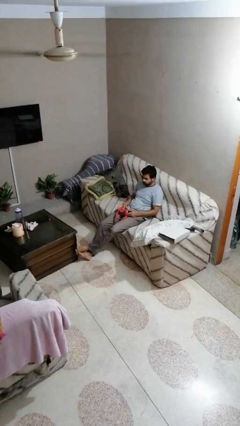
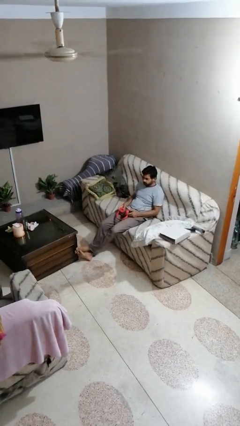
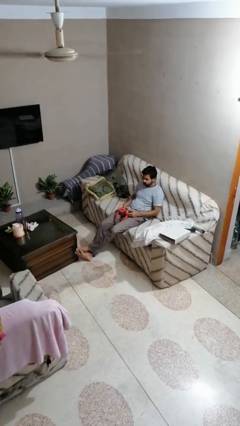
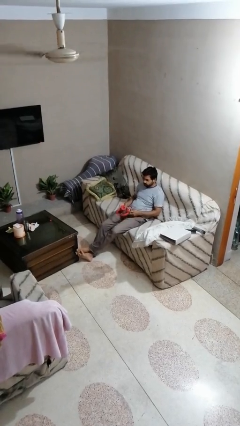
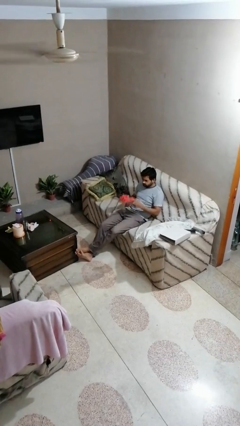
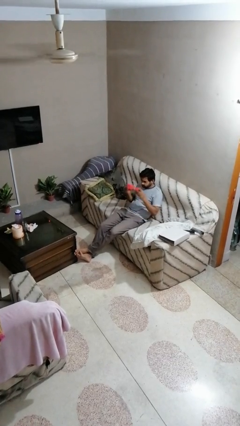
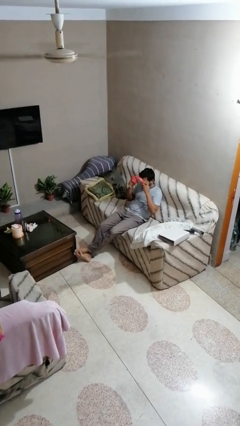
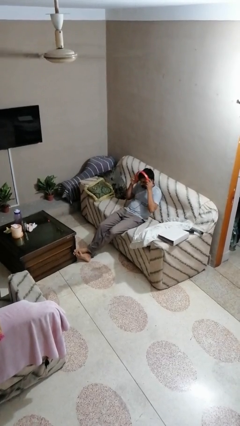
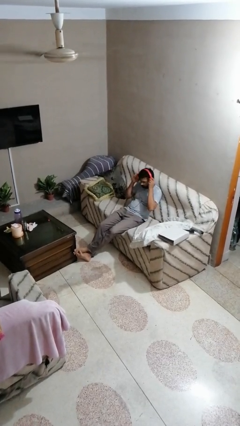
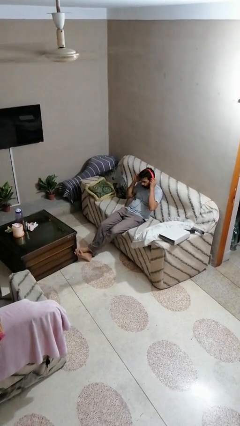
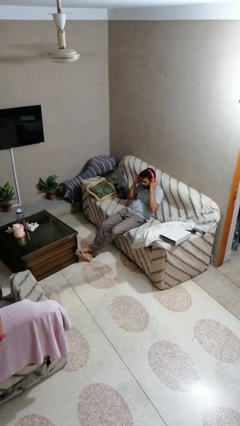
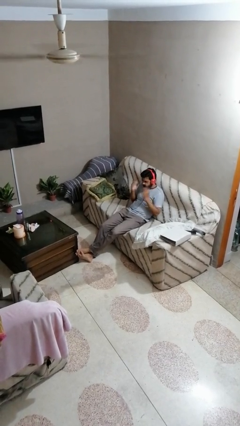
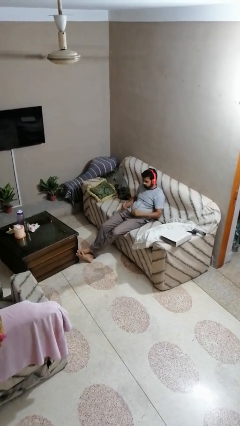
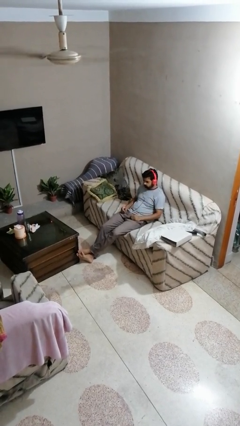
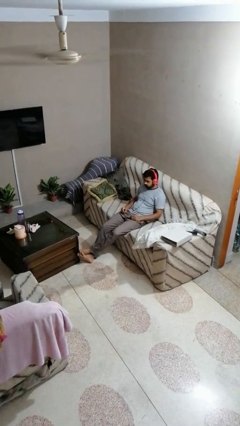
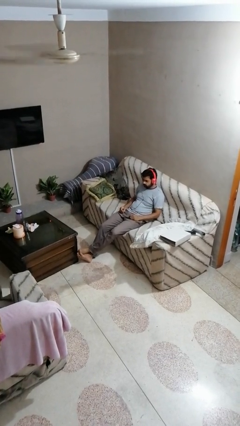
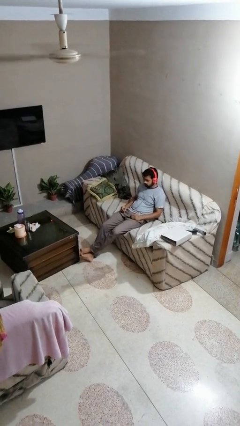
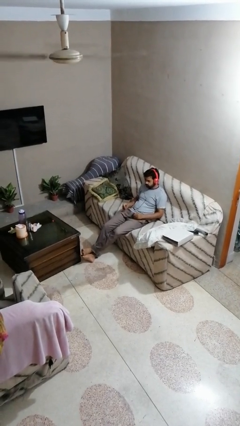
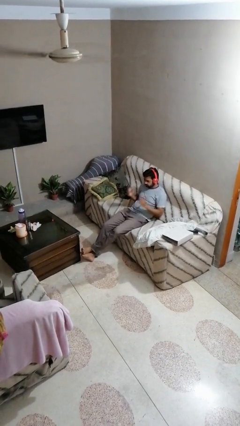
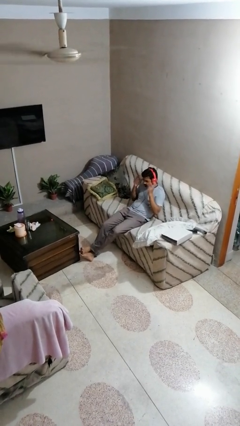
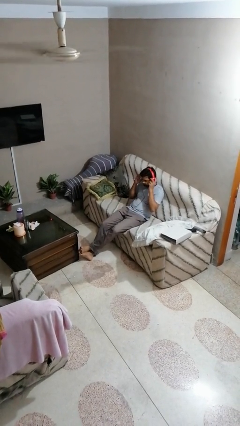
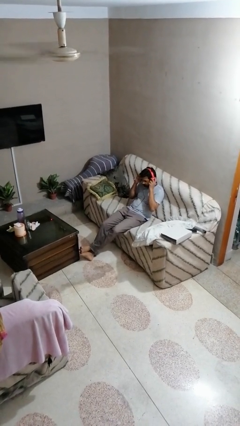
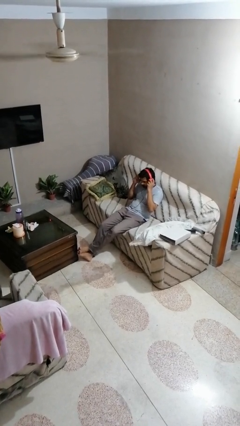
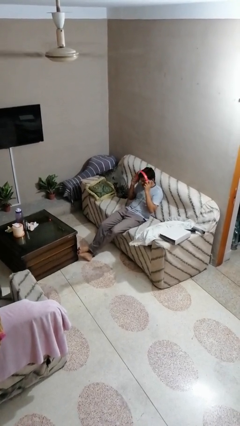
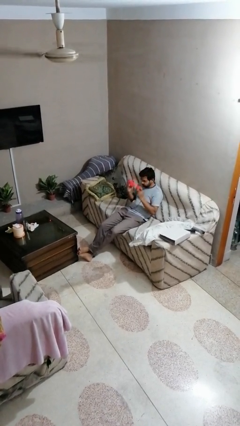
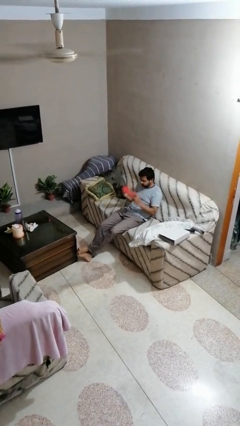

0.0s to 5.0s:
person puts on headphones

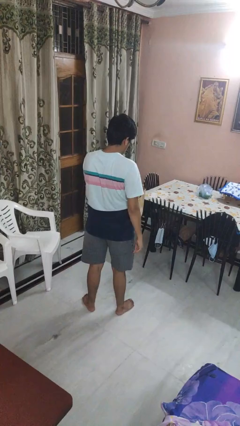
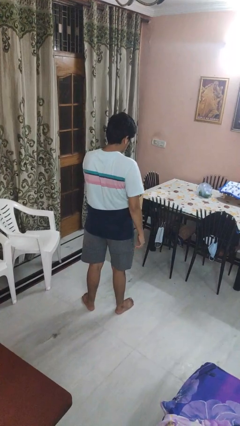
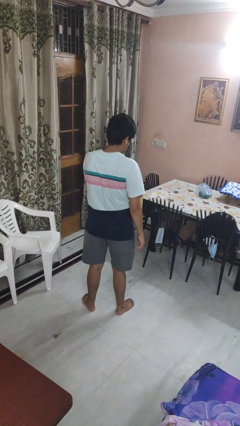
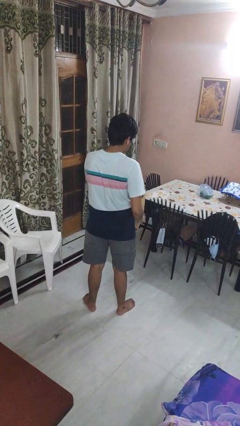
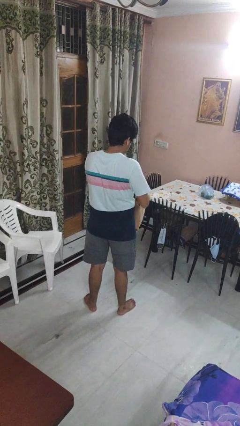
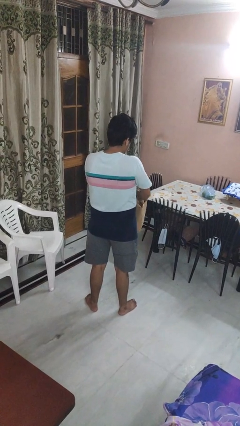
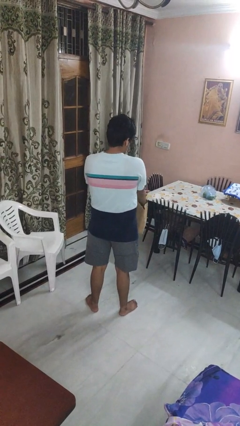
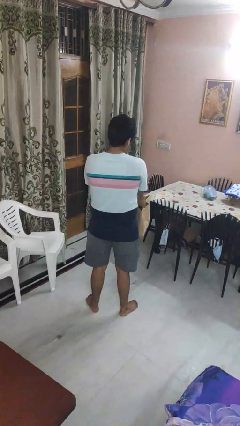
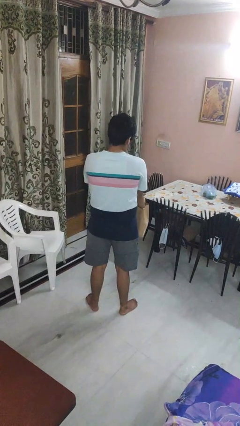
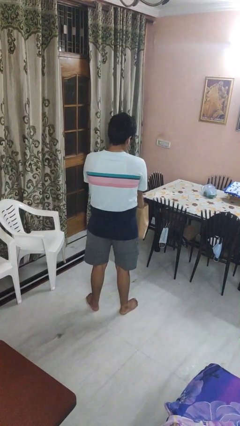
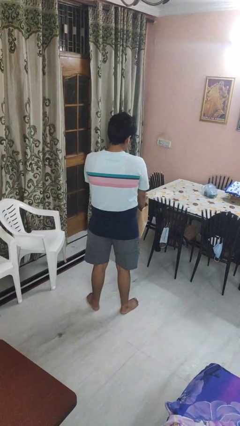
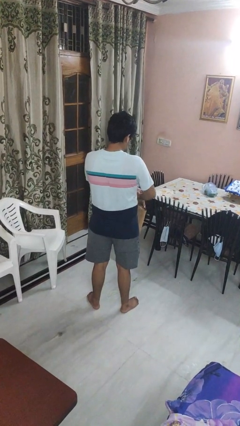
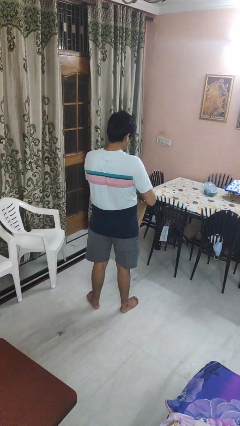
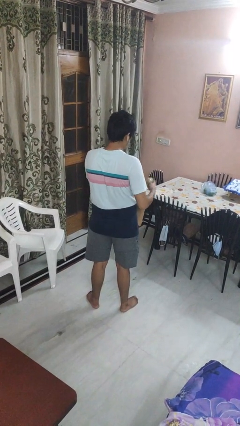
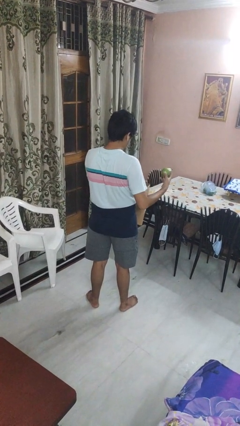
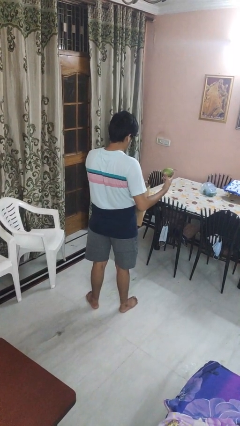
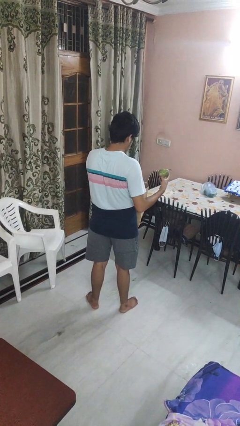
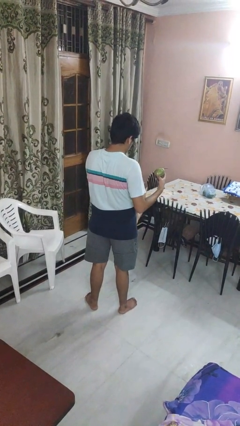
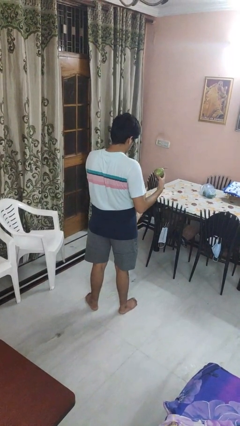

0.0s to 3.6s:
person takes object from bag

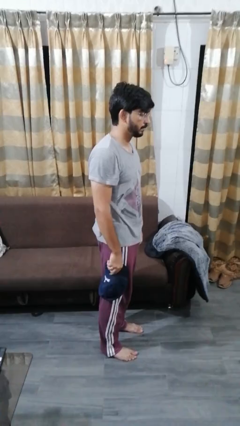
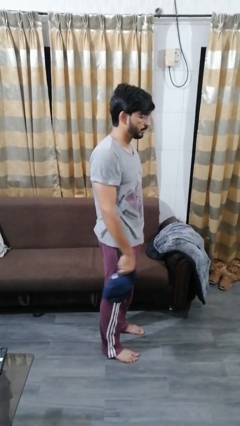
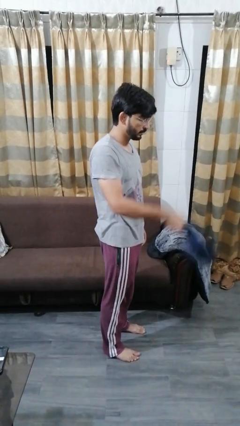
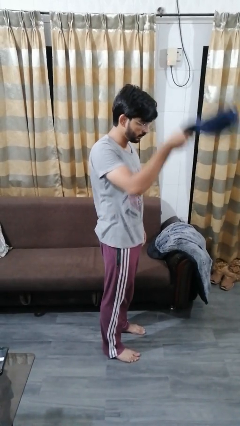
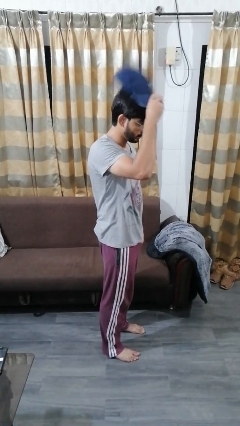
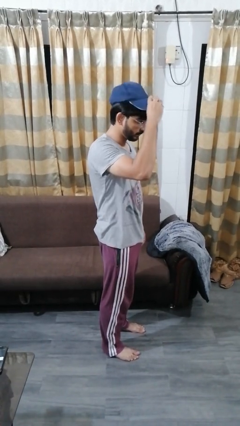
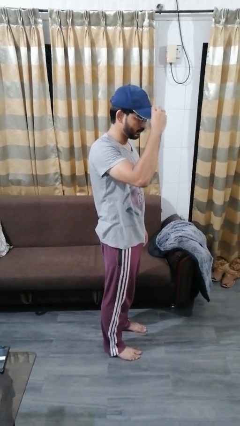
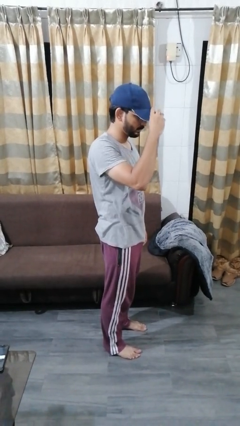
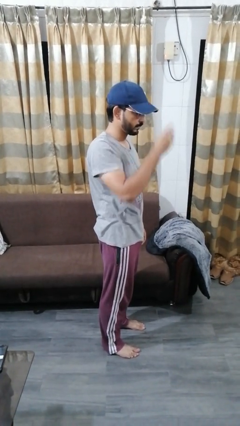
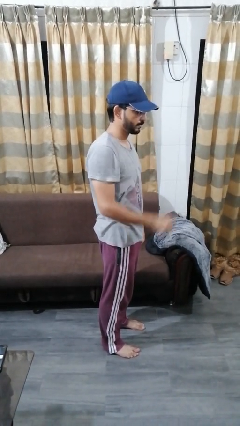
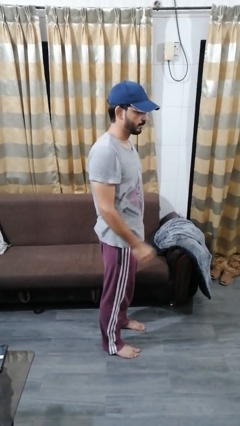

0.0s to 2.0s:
person puts on hat

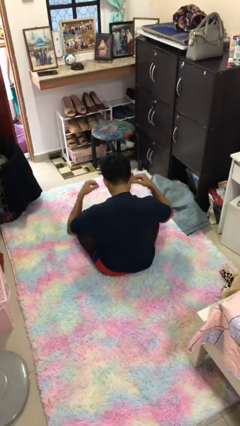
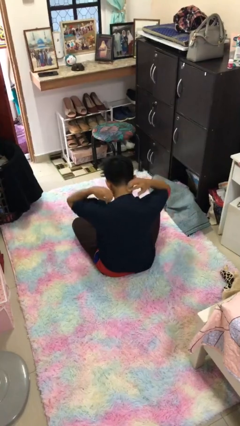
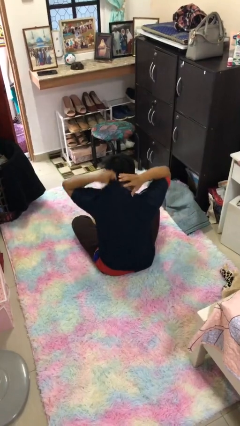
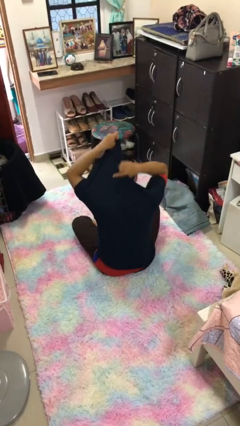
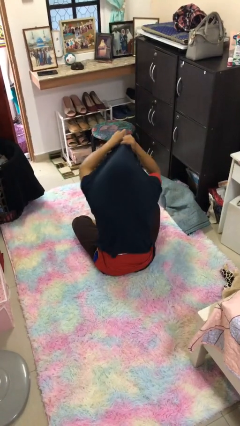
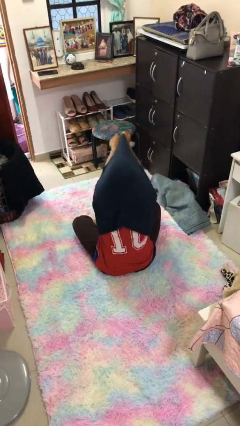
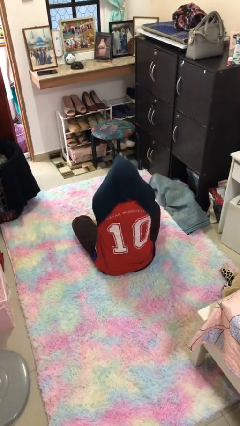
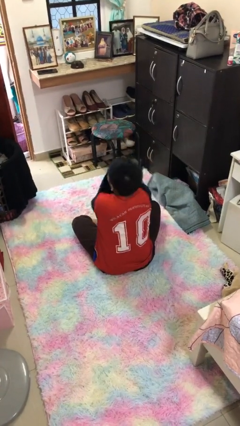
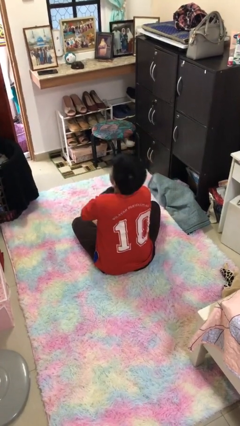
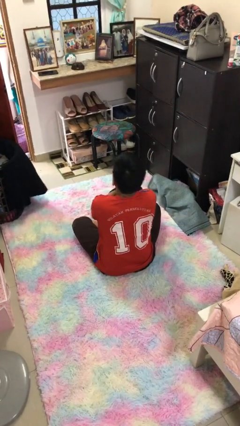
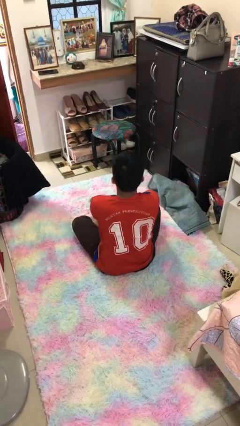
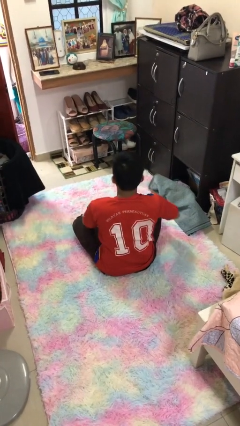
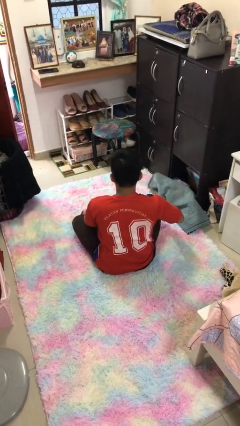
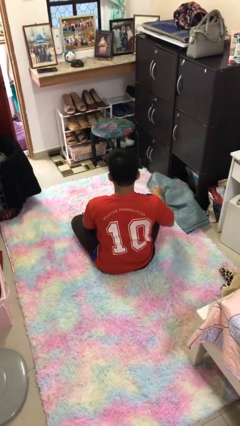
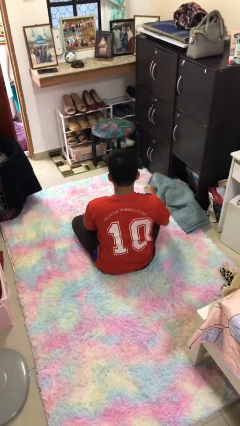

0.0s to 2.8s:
person takes off shirt

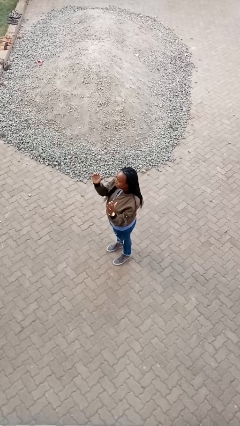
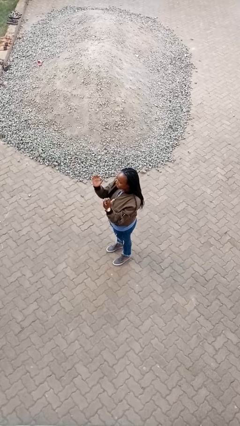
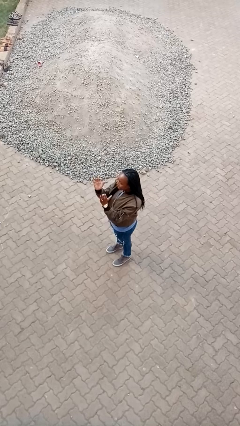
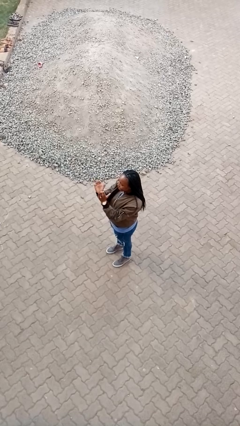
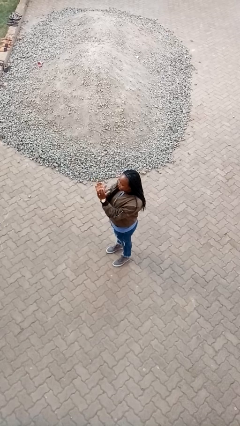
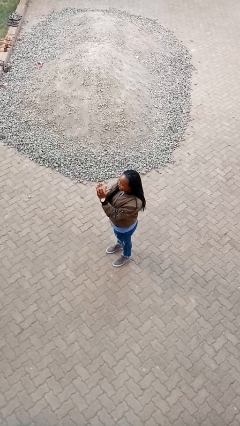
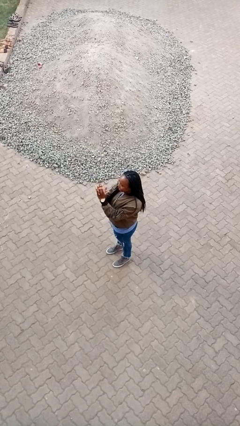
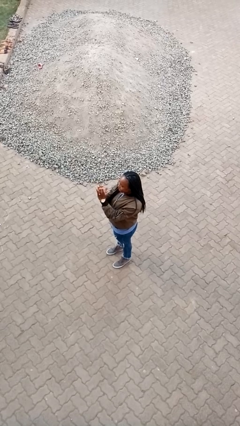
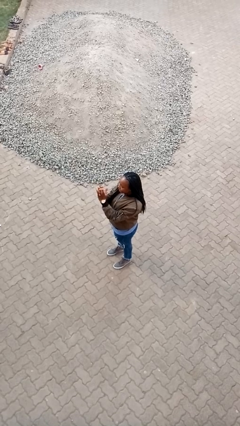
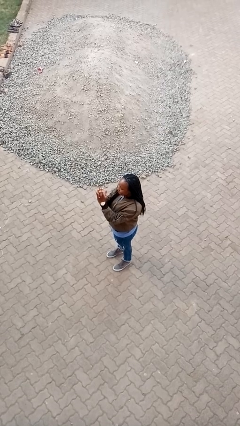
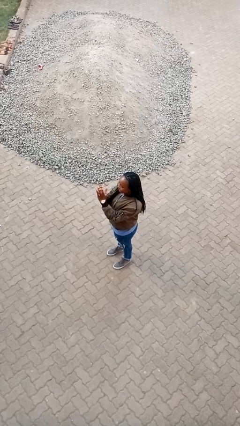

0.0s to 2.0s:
person gestures zoom in

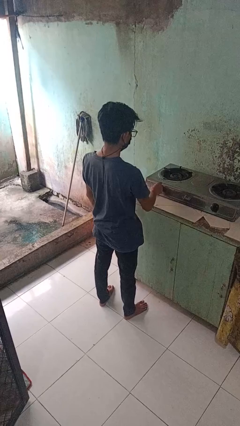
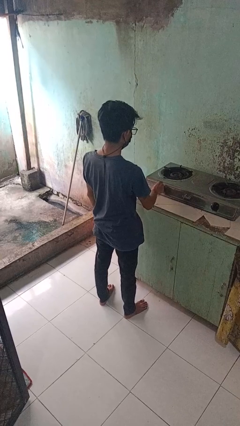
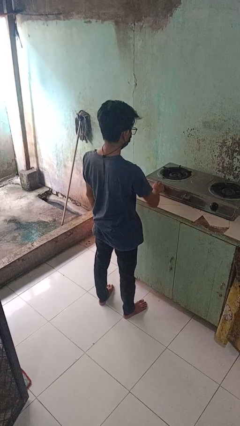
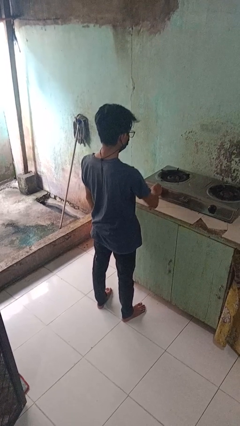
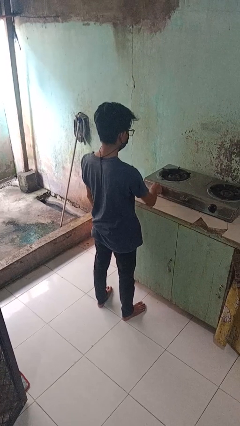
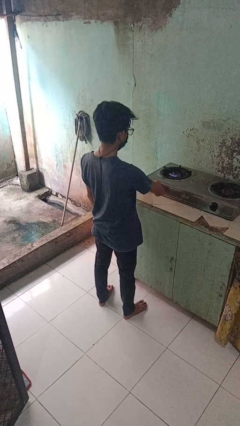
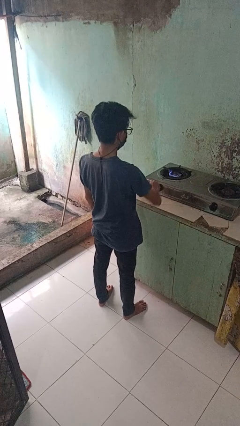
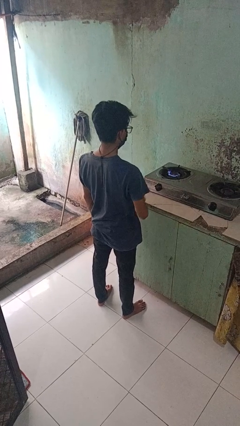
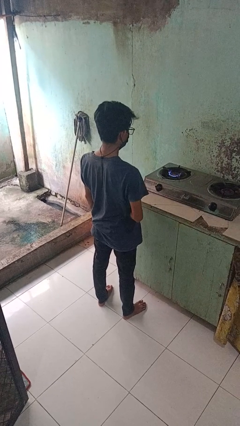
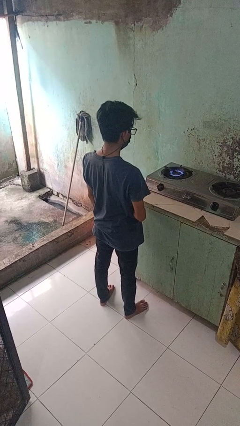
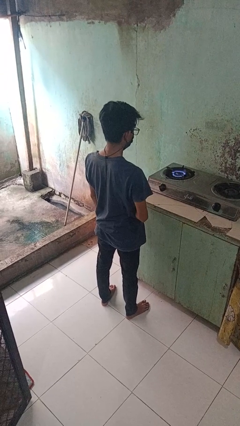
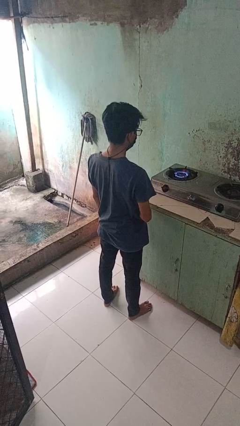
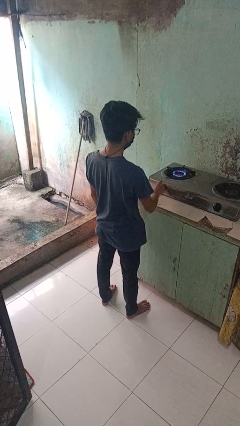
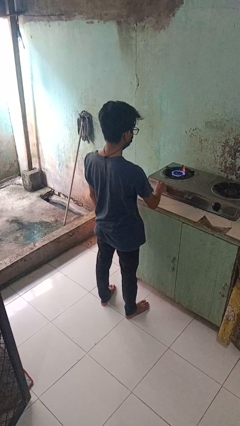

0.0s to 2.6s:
person turns on stovetop
